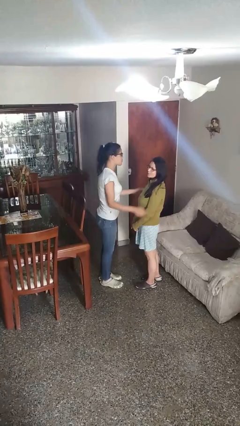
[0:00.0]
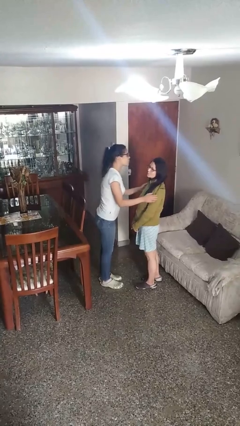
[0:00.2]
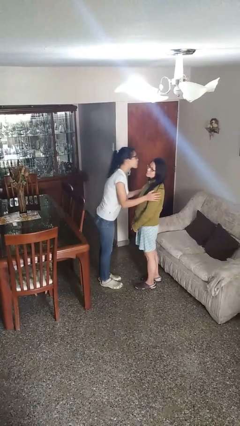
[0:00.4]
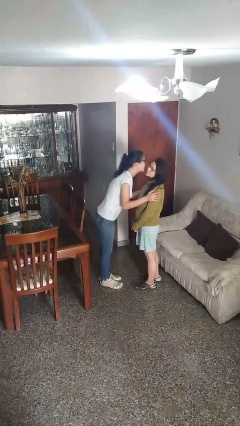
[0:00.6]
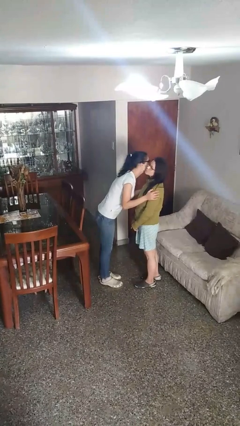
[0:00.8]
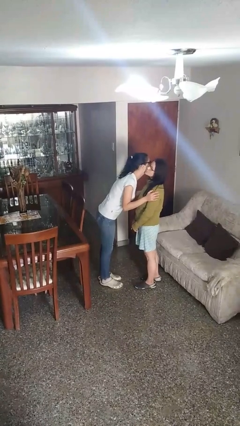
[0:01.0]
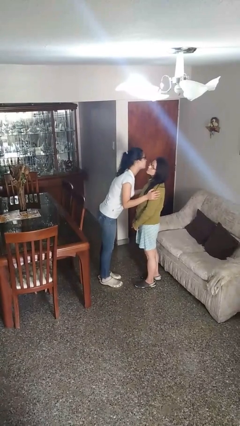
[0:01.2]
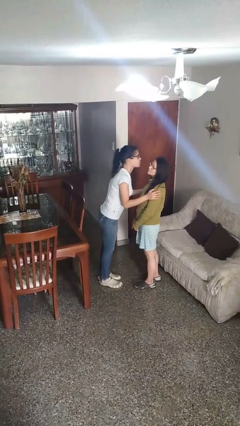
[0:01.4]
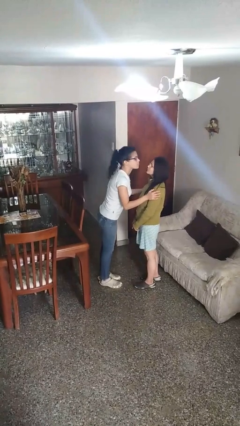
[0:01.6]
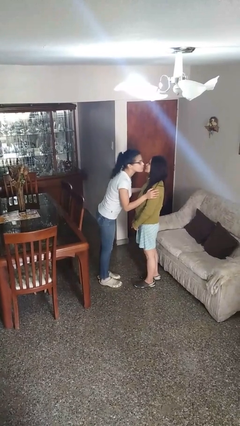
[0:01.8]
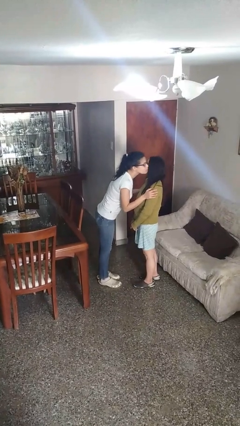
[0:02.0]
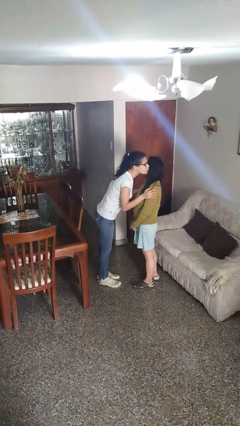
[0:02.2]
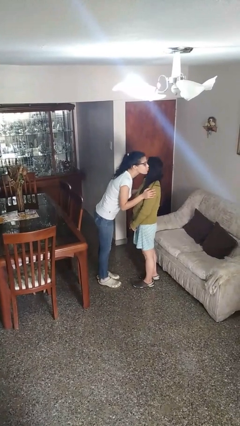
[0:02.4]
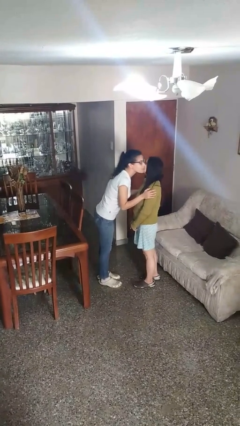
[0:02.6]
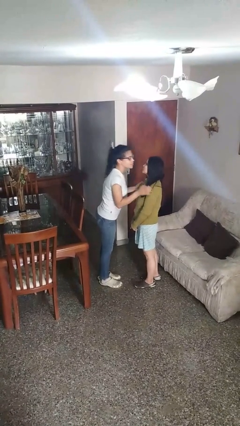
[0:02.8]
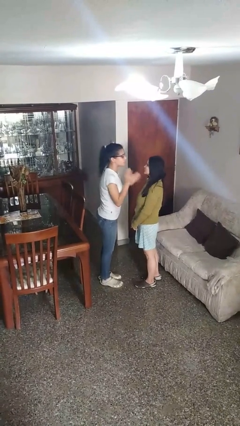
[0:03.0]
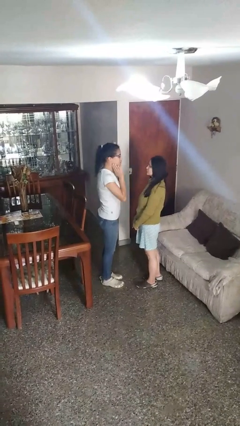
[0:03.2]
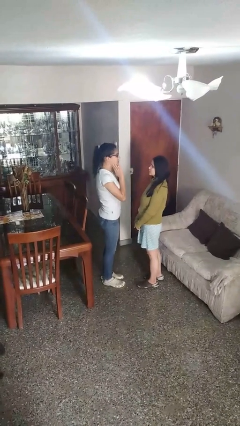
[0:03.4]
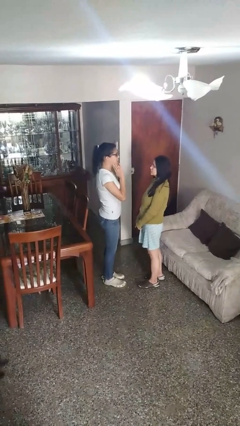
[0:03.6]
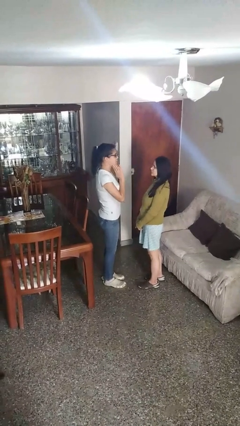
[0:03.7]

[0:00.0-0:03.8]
person kisses cheek of person

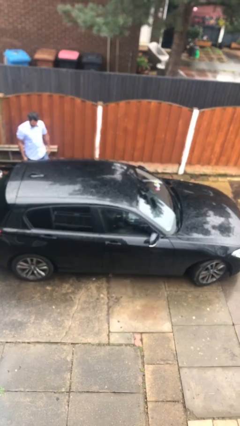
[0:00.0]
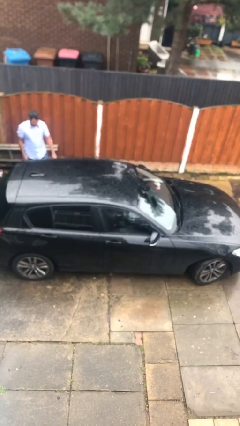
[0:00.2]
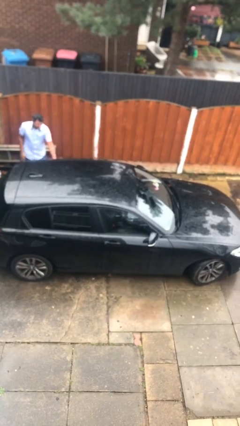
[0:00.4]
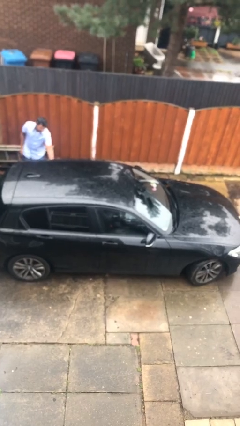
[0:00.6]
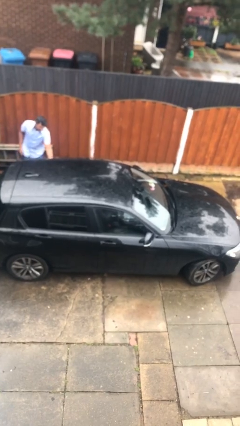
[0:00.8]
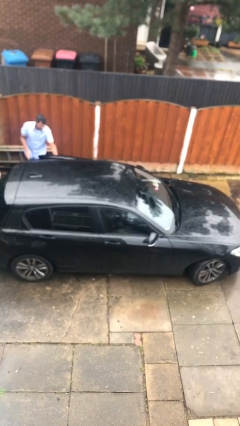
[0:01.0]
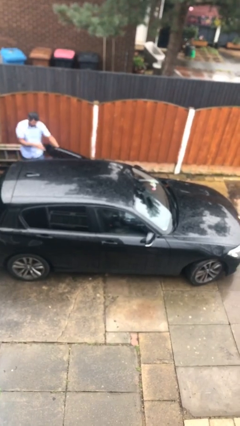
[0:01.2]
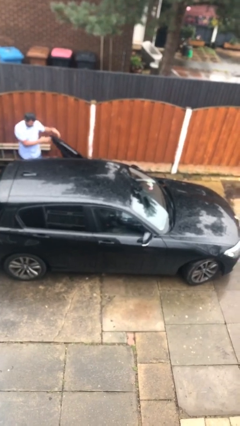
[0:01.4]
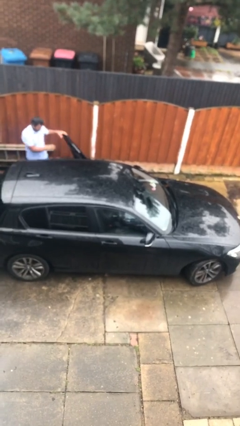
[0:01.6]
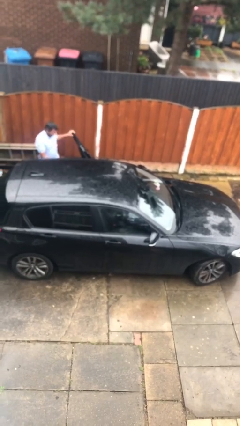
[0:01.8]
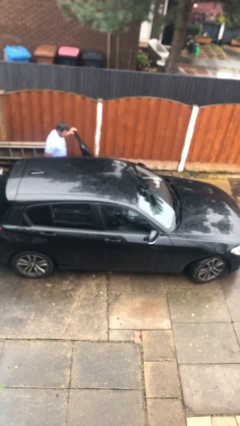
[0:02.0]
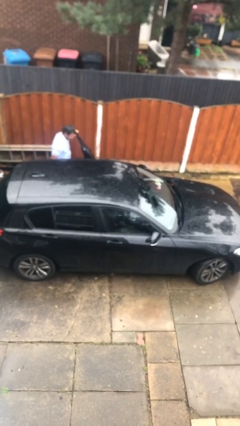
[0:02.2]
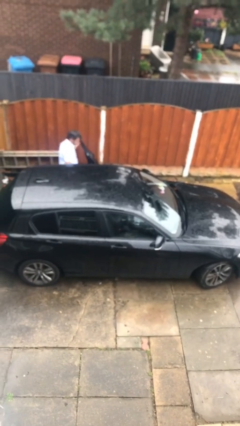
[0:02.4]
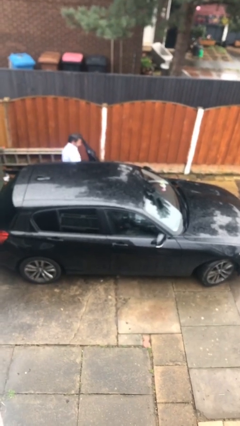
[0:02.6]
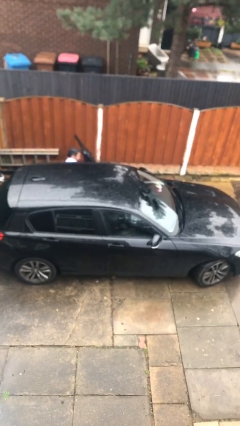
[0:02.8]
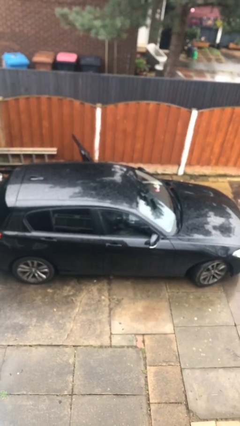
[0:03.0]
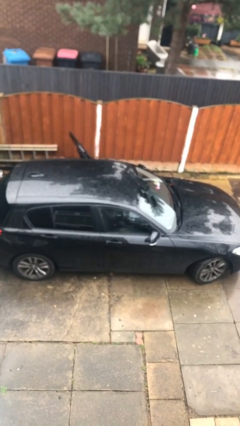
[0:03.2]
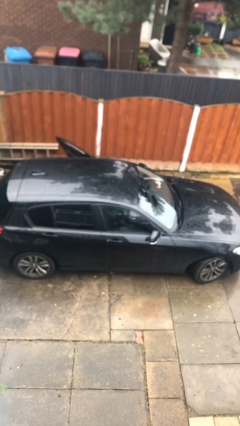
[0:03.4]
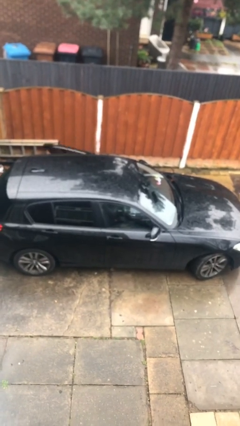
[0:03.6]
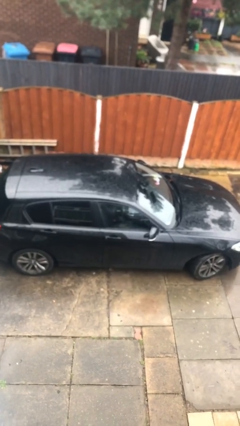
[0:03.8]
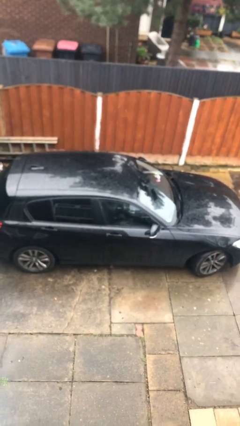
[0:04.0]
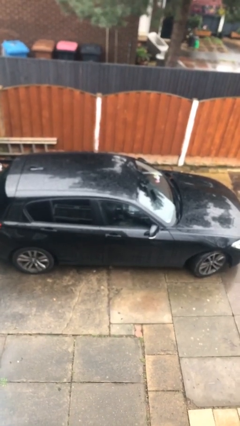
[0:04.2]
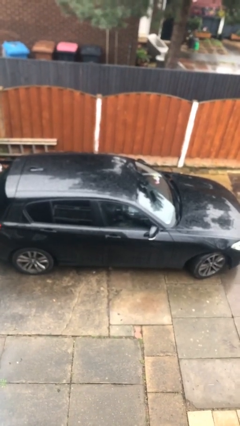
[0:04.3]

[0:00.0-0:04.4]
car picks up person

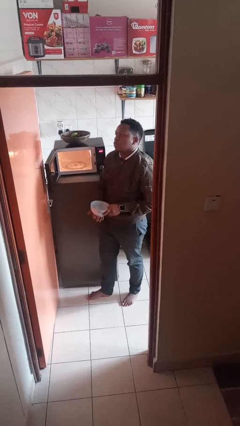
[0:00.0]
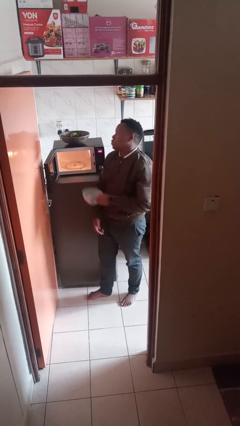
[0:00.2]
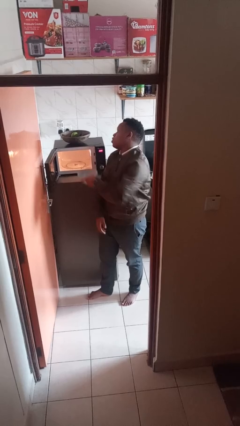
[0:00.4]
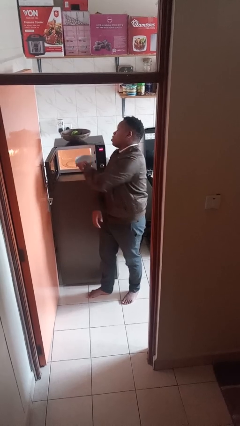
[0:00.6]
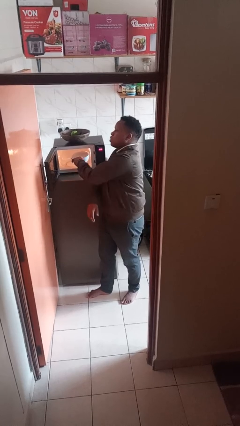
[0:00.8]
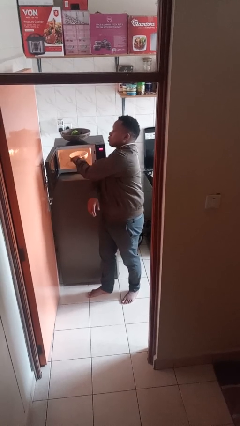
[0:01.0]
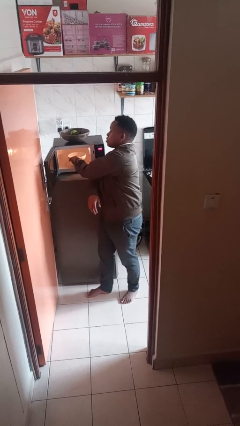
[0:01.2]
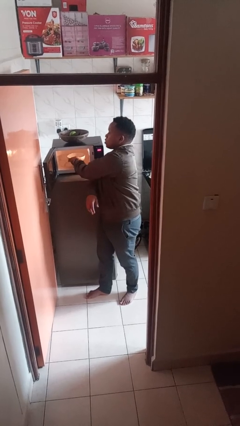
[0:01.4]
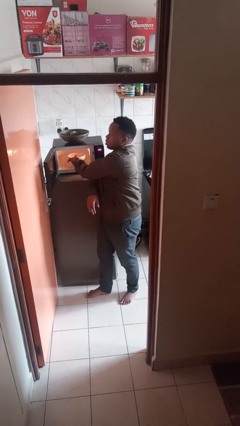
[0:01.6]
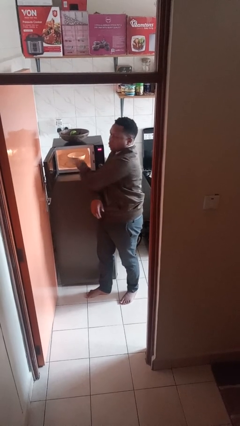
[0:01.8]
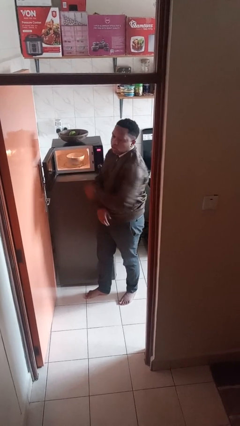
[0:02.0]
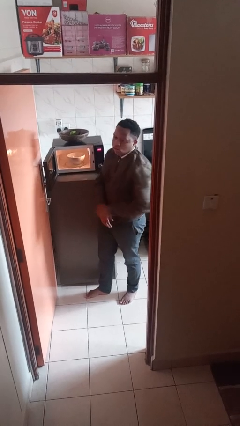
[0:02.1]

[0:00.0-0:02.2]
person puts object into microwave

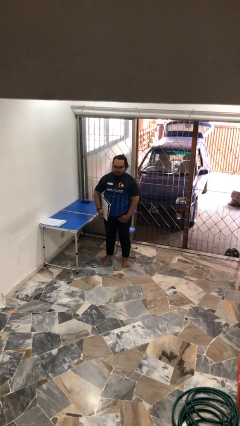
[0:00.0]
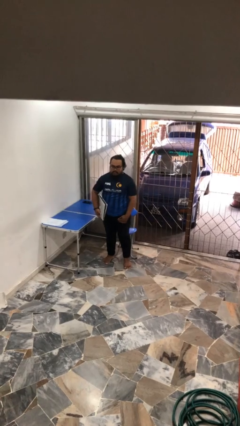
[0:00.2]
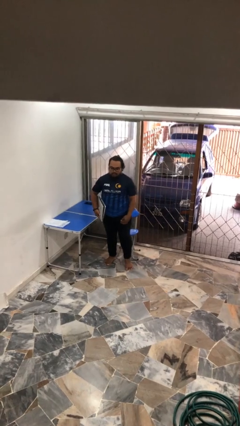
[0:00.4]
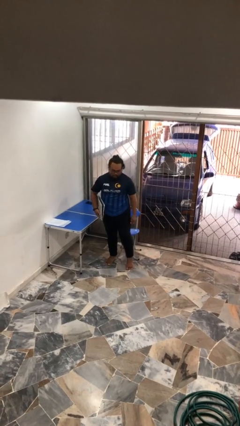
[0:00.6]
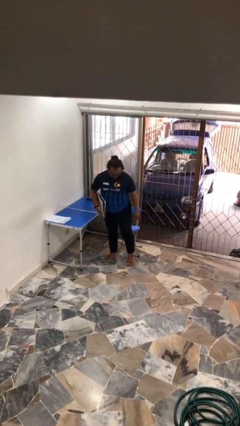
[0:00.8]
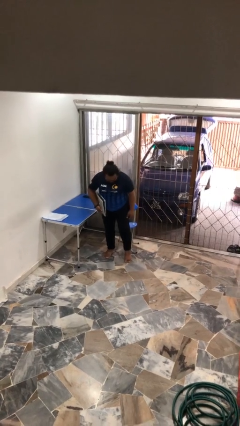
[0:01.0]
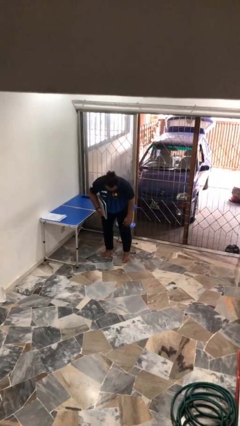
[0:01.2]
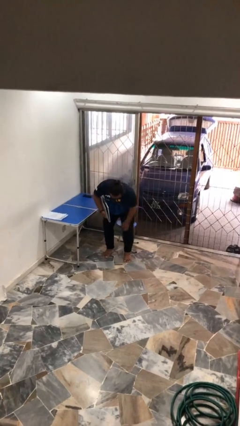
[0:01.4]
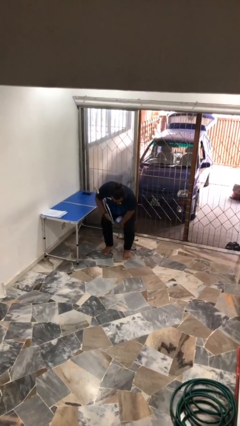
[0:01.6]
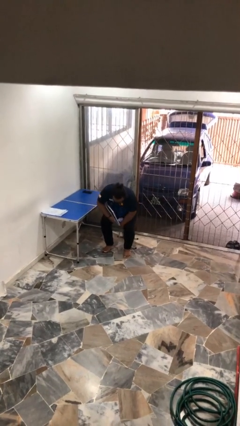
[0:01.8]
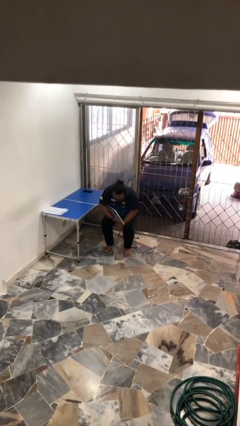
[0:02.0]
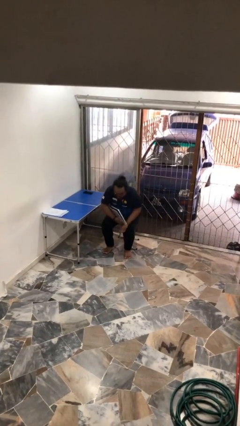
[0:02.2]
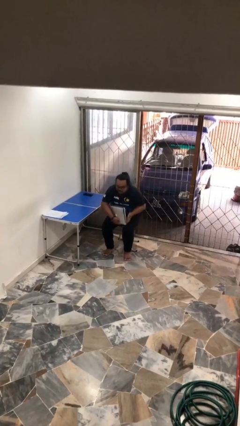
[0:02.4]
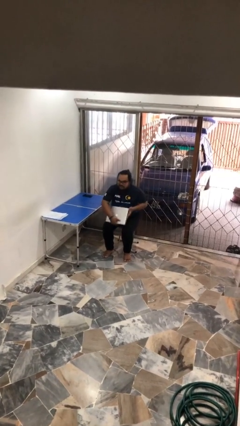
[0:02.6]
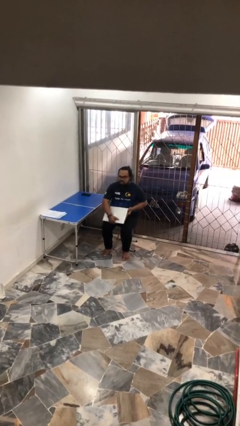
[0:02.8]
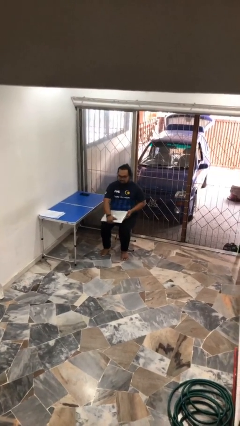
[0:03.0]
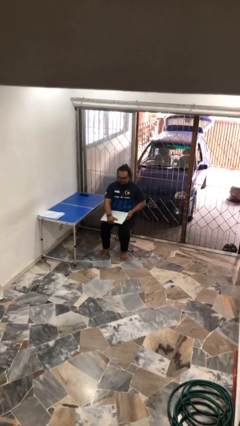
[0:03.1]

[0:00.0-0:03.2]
person sits down

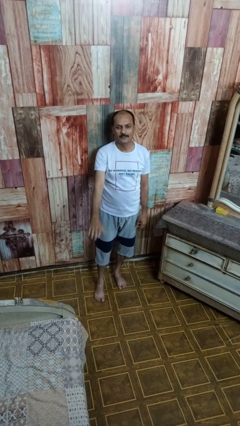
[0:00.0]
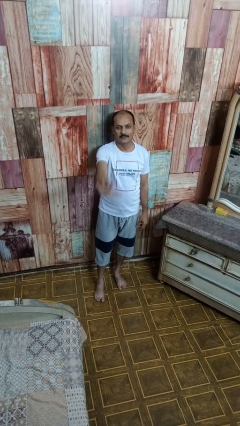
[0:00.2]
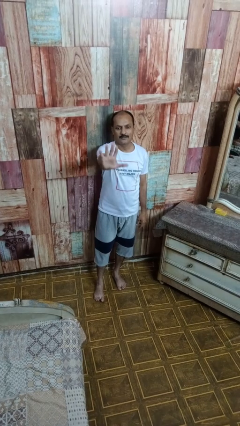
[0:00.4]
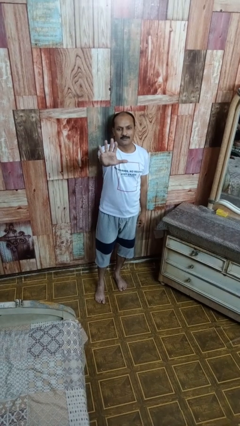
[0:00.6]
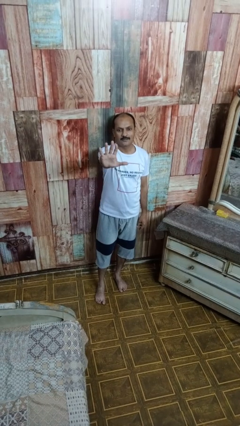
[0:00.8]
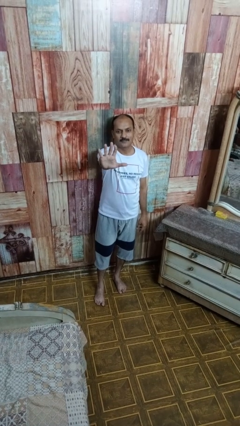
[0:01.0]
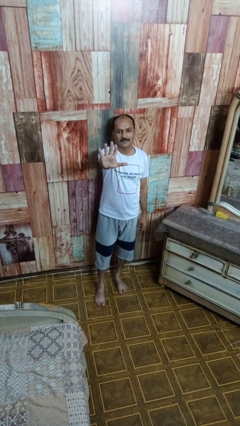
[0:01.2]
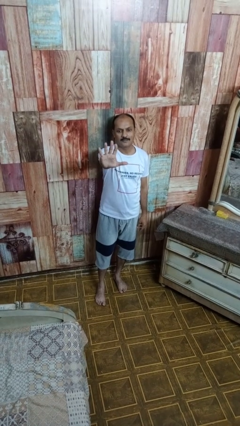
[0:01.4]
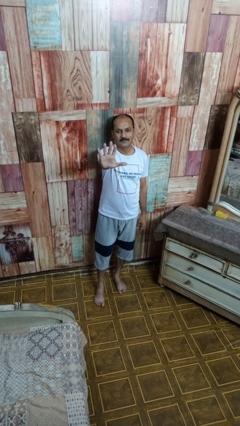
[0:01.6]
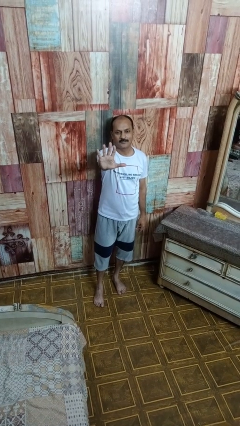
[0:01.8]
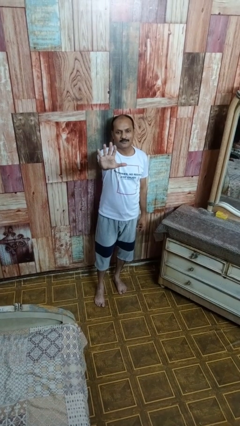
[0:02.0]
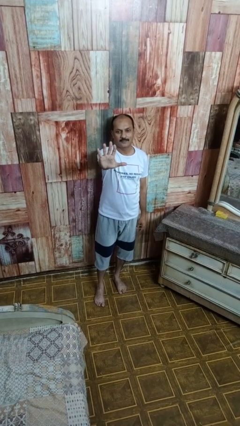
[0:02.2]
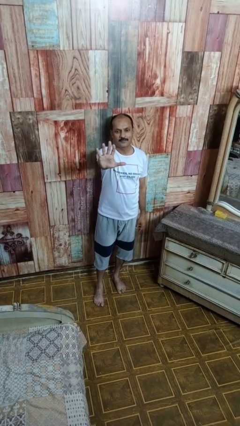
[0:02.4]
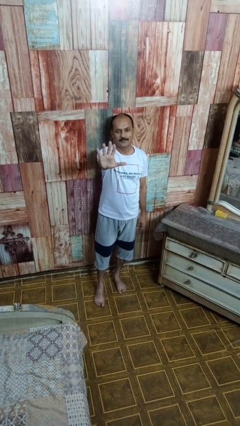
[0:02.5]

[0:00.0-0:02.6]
person gestures number five

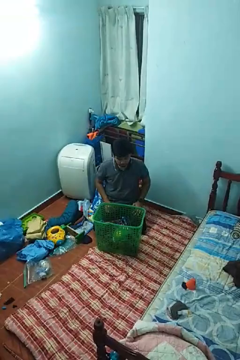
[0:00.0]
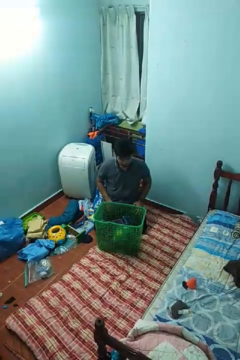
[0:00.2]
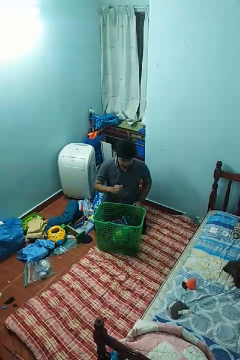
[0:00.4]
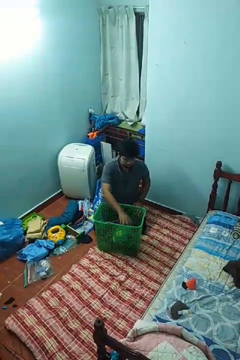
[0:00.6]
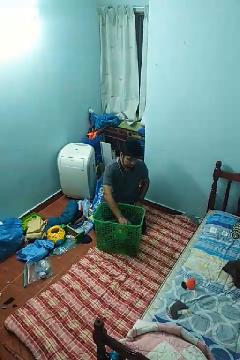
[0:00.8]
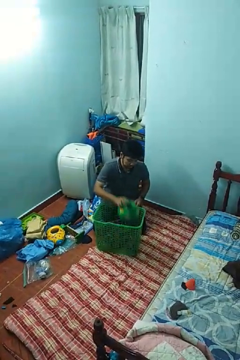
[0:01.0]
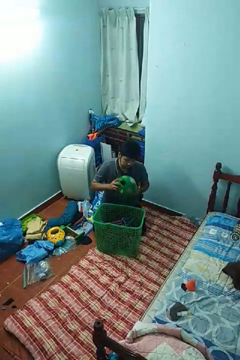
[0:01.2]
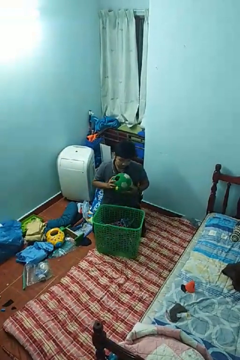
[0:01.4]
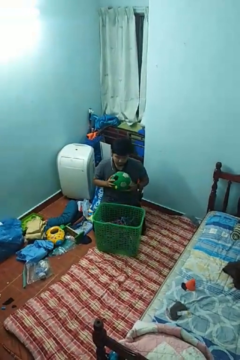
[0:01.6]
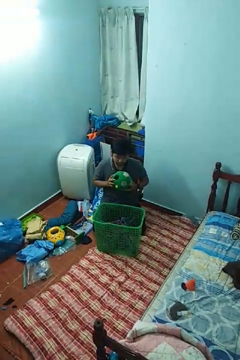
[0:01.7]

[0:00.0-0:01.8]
person takes object from basket

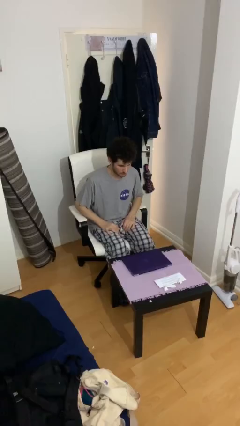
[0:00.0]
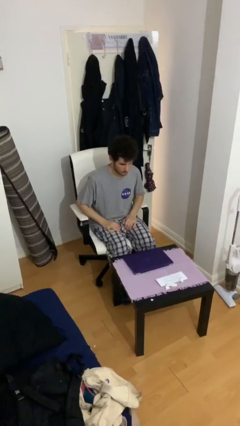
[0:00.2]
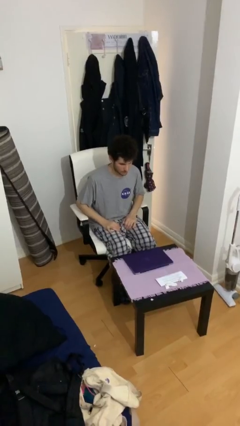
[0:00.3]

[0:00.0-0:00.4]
person interacts with laptop
